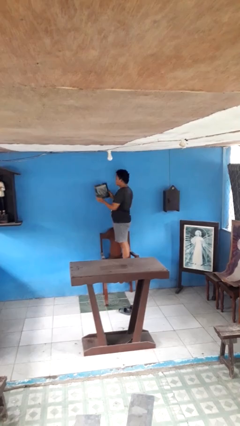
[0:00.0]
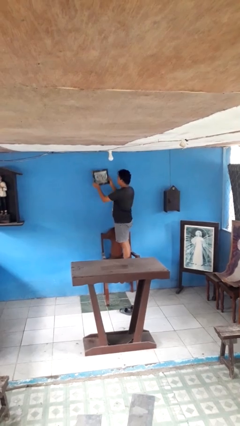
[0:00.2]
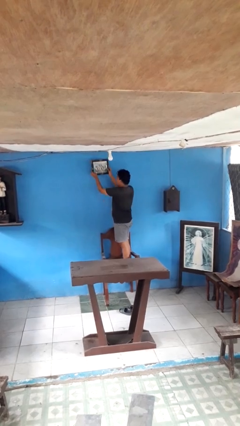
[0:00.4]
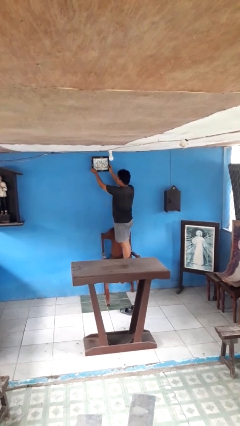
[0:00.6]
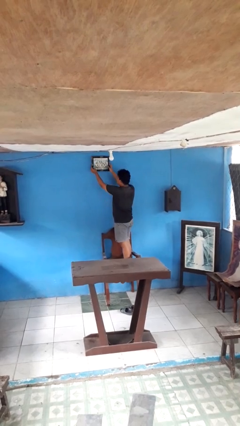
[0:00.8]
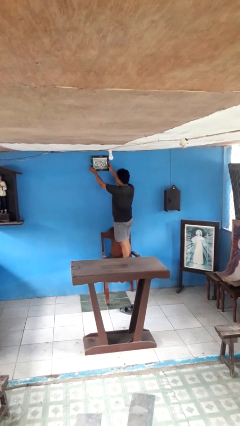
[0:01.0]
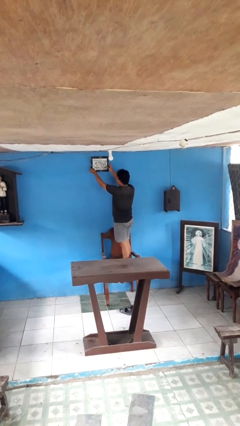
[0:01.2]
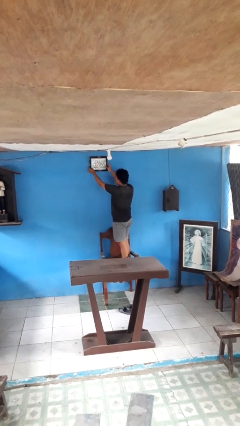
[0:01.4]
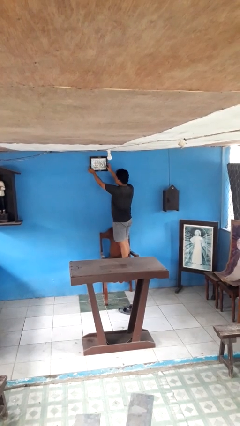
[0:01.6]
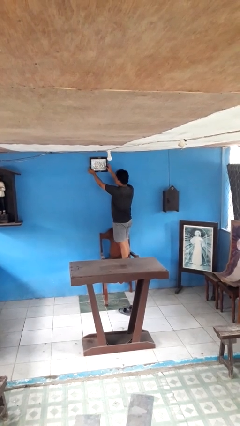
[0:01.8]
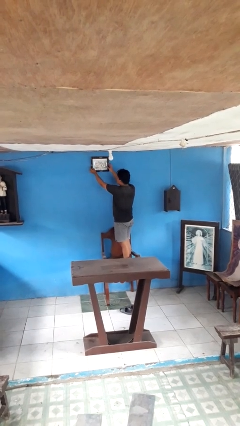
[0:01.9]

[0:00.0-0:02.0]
person puts up picture frame

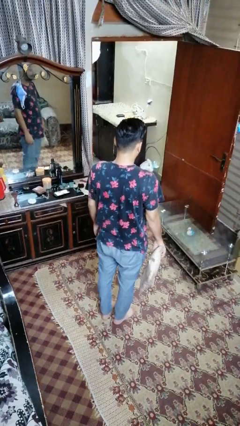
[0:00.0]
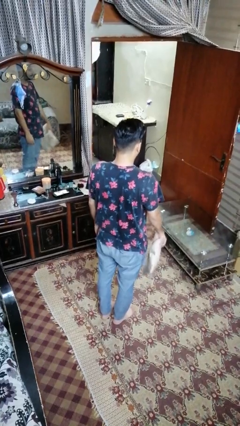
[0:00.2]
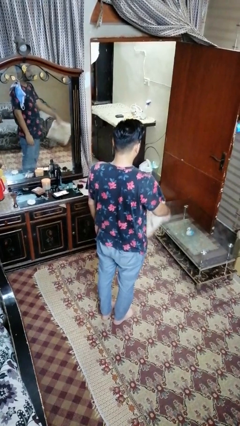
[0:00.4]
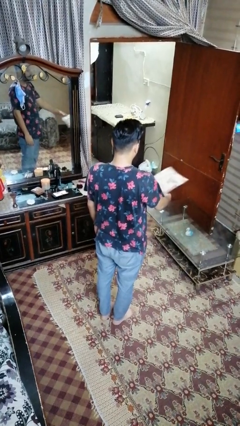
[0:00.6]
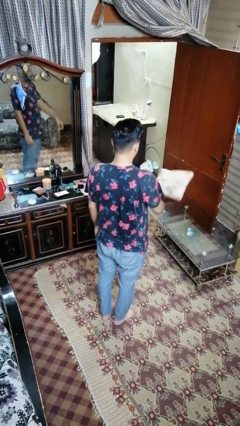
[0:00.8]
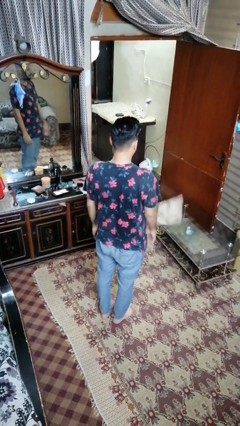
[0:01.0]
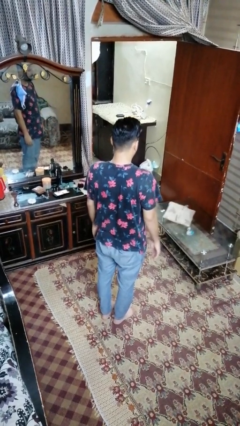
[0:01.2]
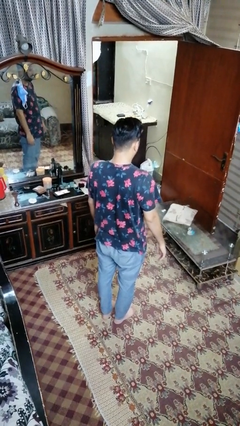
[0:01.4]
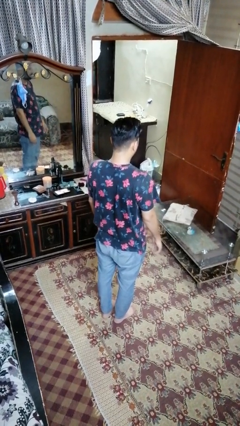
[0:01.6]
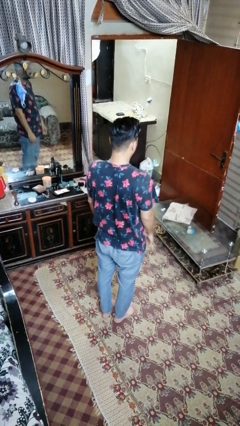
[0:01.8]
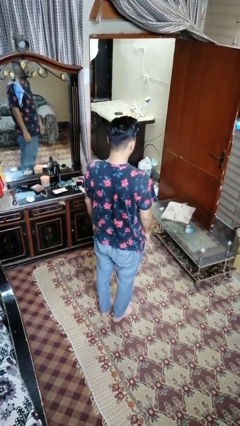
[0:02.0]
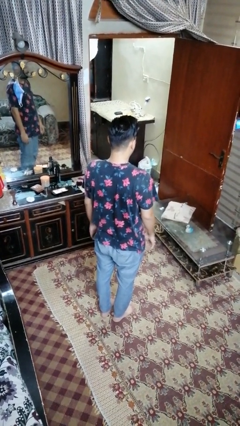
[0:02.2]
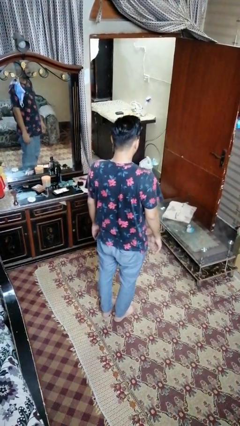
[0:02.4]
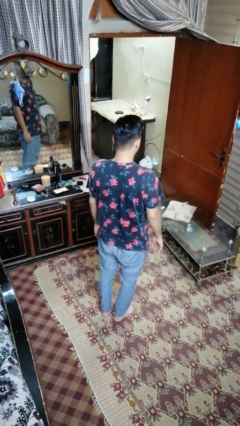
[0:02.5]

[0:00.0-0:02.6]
person throws object on table

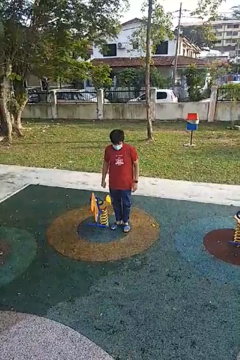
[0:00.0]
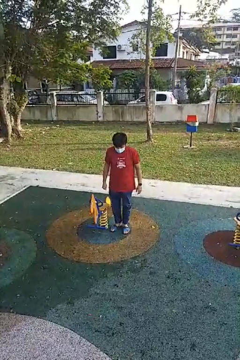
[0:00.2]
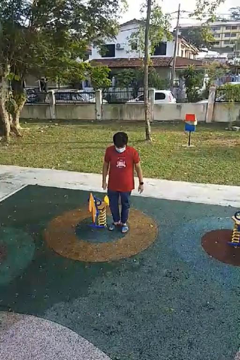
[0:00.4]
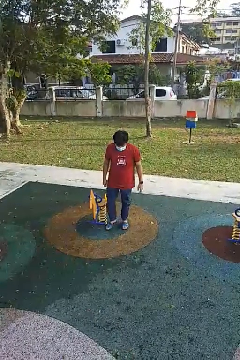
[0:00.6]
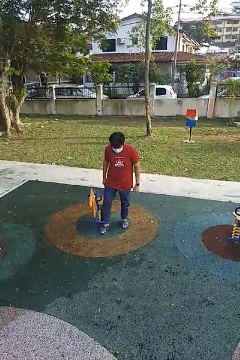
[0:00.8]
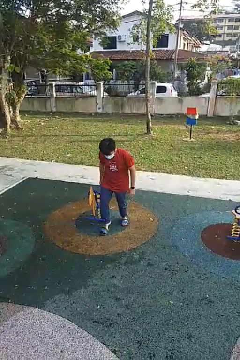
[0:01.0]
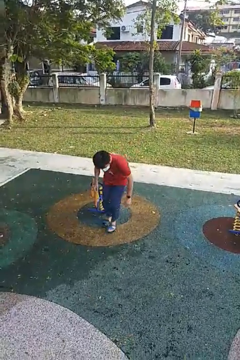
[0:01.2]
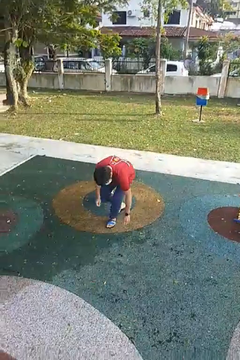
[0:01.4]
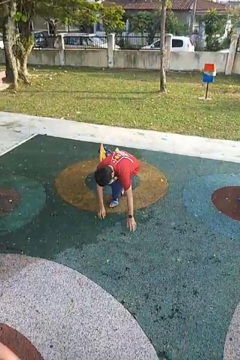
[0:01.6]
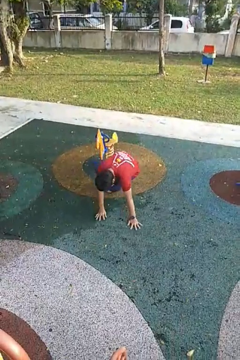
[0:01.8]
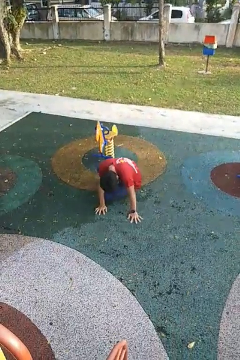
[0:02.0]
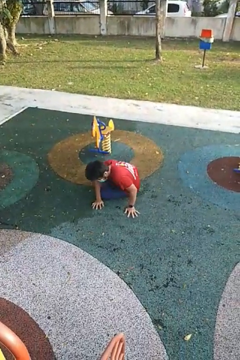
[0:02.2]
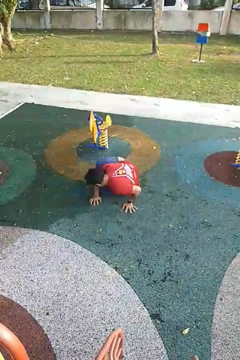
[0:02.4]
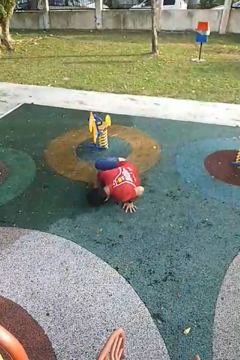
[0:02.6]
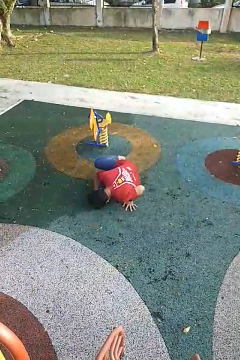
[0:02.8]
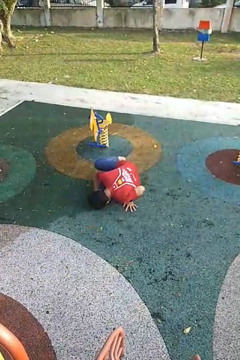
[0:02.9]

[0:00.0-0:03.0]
person trips on object on floor

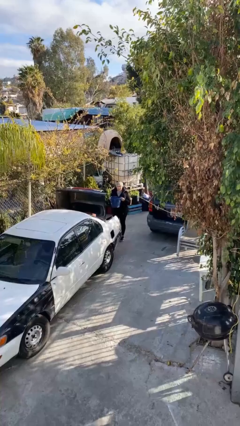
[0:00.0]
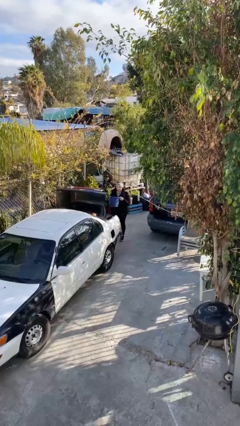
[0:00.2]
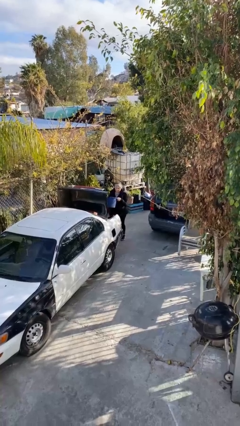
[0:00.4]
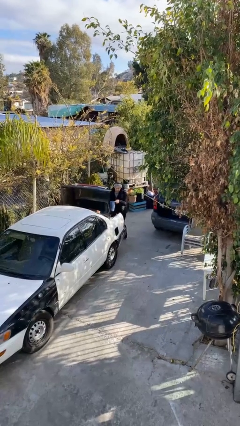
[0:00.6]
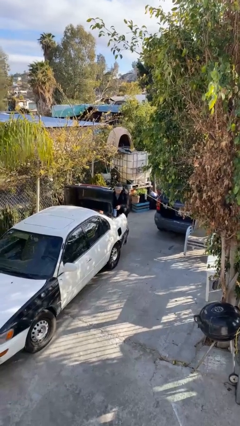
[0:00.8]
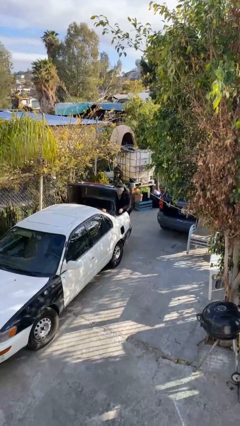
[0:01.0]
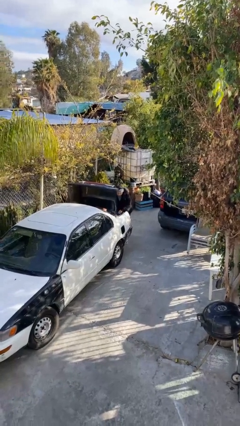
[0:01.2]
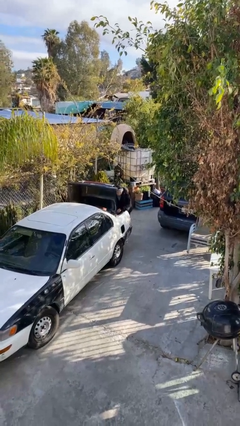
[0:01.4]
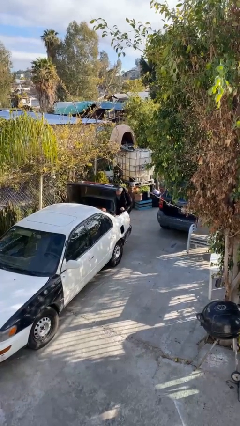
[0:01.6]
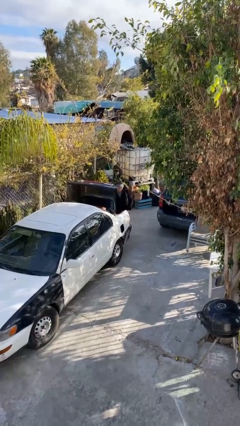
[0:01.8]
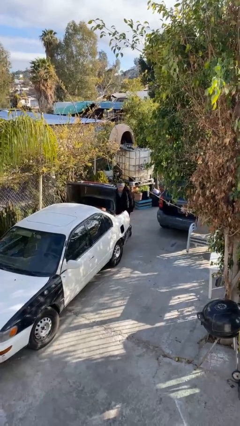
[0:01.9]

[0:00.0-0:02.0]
person loads car

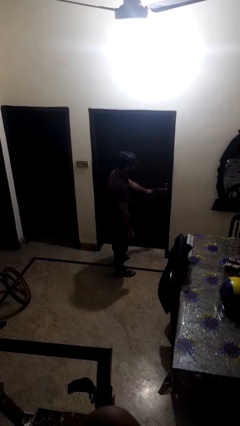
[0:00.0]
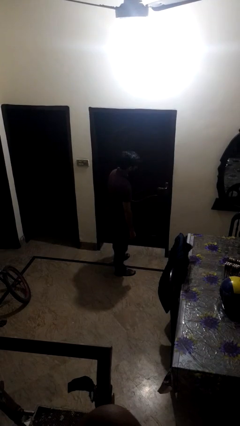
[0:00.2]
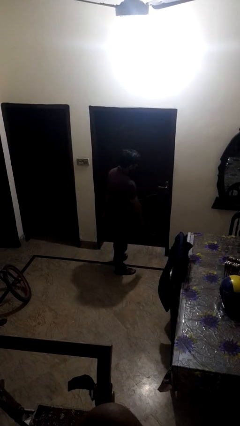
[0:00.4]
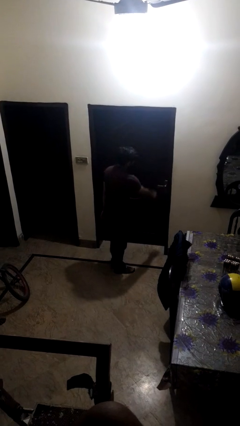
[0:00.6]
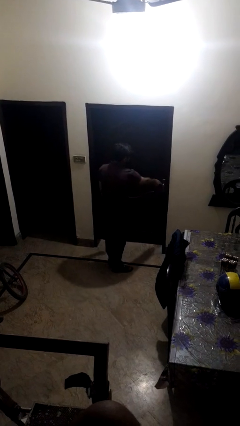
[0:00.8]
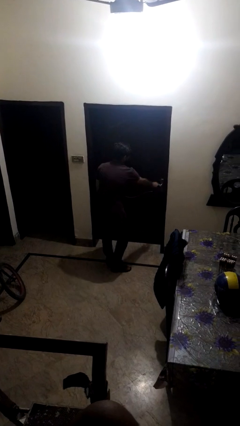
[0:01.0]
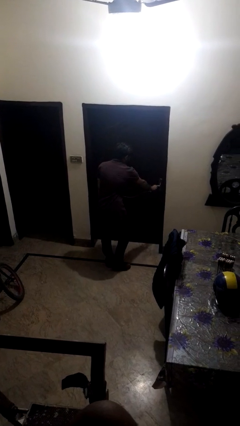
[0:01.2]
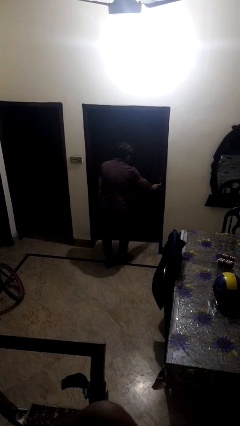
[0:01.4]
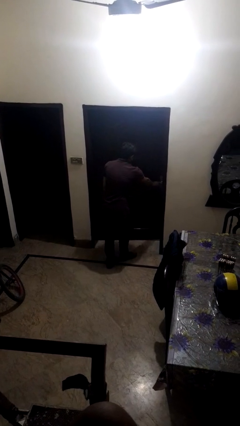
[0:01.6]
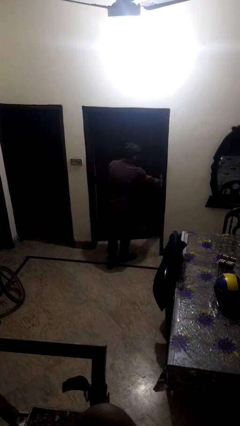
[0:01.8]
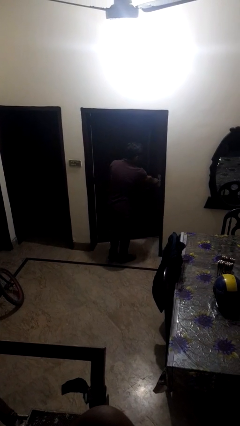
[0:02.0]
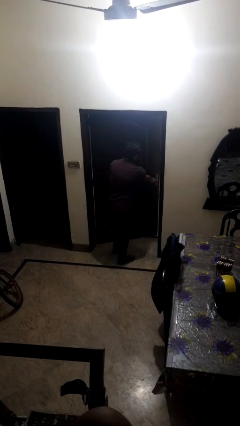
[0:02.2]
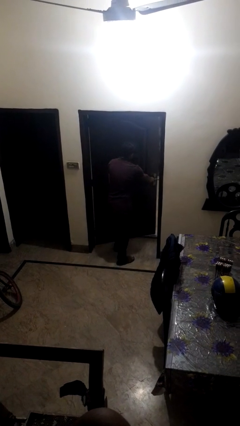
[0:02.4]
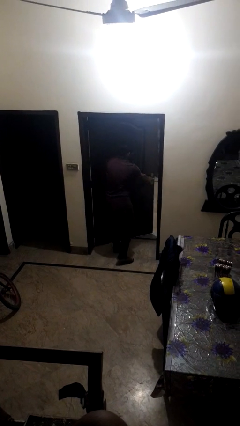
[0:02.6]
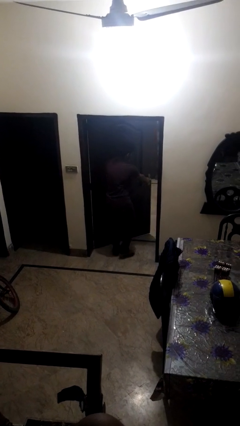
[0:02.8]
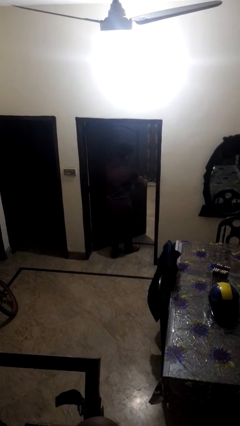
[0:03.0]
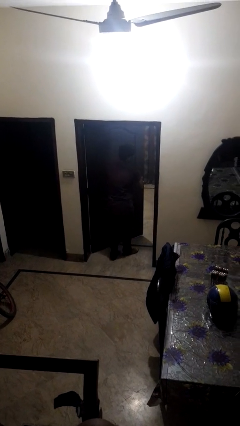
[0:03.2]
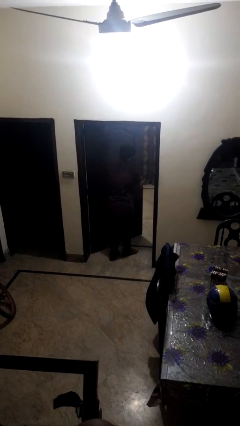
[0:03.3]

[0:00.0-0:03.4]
person opens facility door

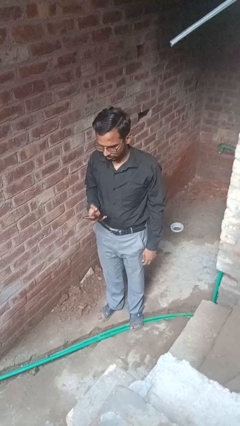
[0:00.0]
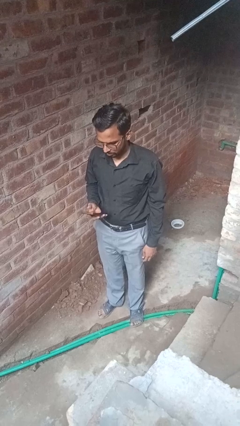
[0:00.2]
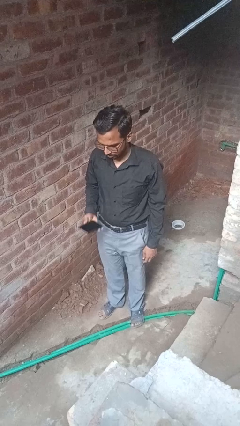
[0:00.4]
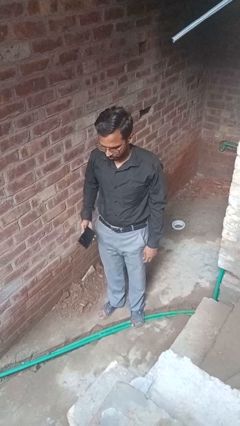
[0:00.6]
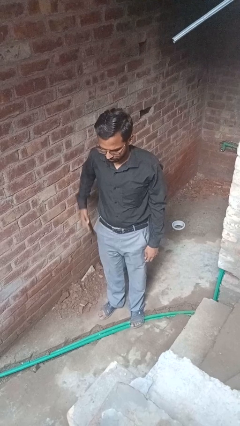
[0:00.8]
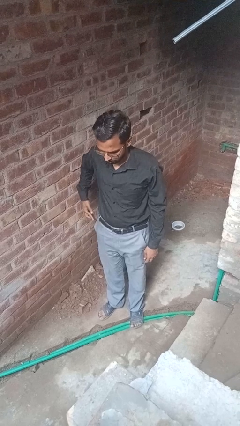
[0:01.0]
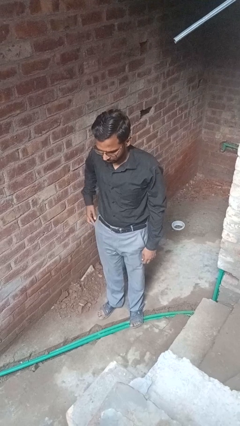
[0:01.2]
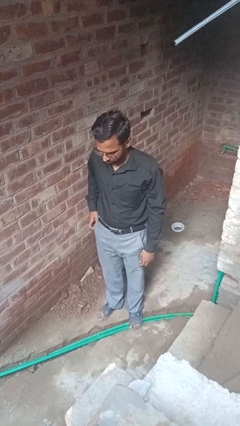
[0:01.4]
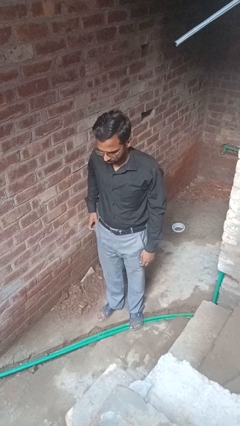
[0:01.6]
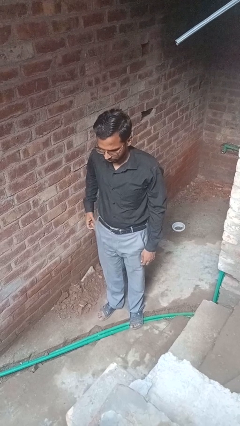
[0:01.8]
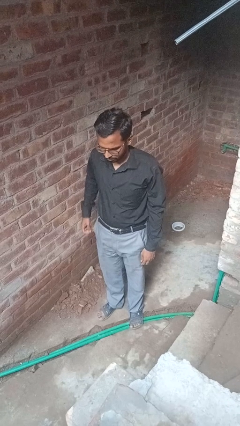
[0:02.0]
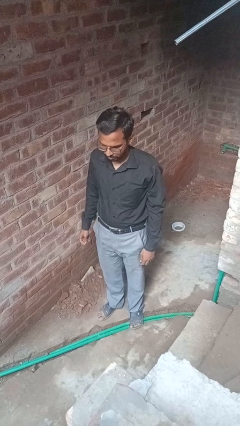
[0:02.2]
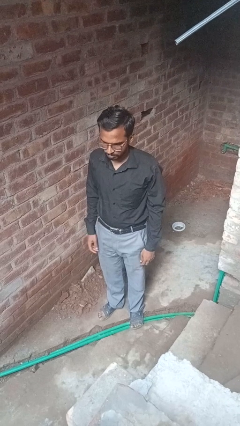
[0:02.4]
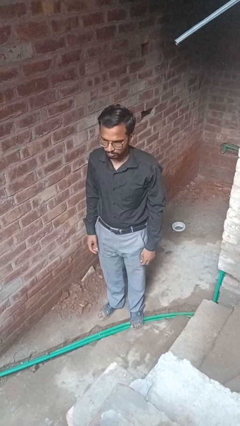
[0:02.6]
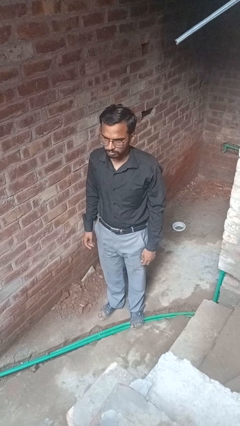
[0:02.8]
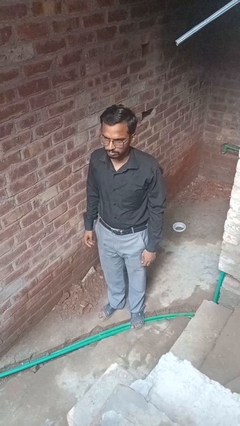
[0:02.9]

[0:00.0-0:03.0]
person puts phone into pocket

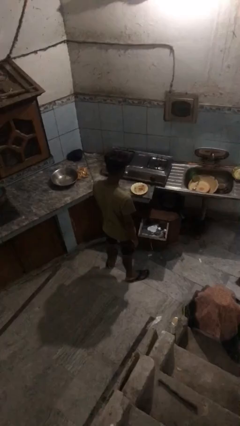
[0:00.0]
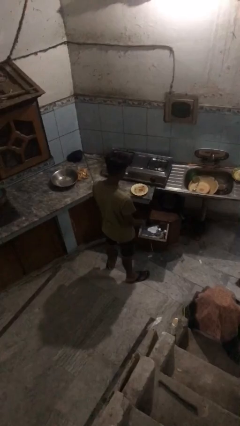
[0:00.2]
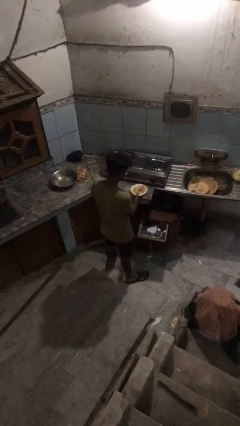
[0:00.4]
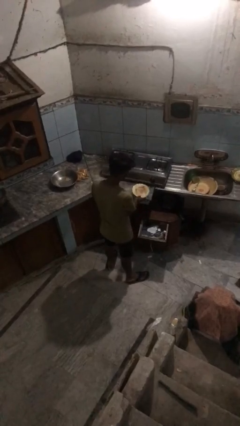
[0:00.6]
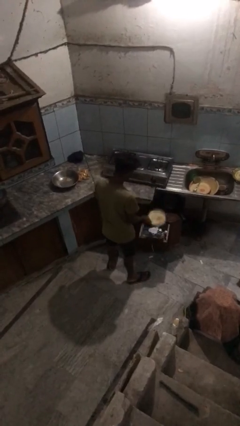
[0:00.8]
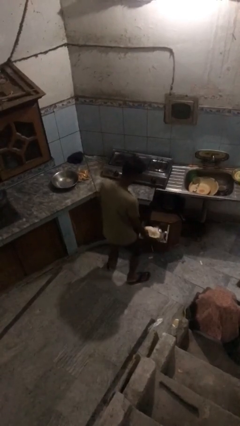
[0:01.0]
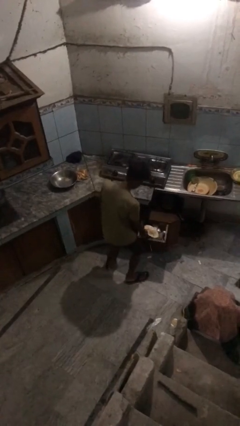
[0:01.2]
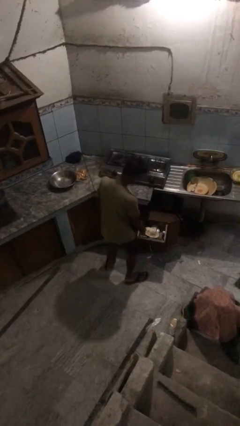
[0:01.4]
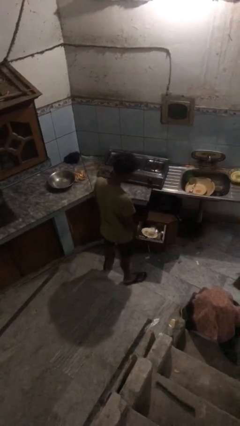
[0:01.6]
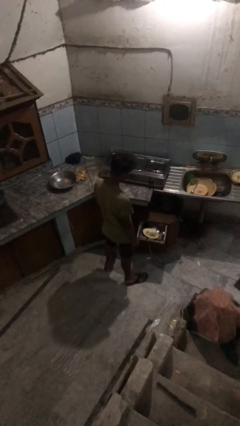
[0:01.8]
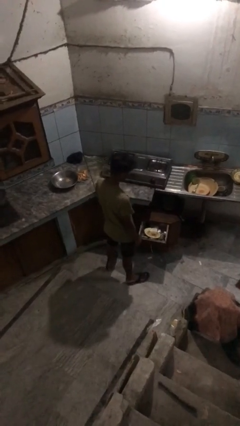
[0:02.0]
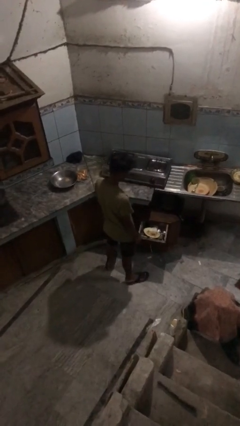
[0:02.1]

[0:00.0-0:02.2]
person puts object into kitchen drawer
